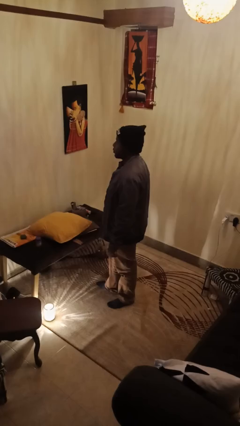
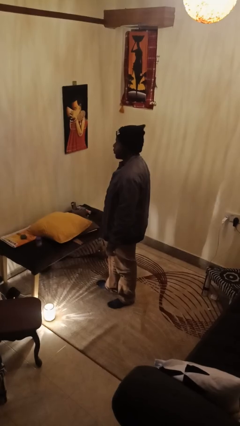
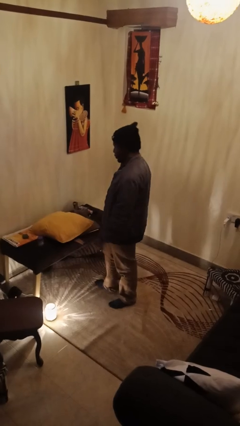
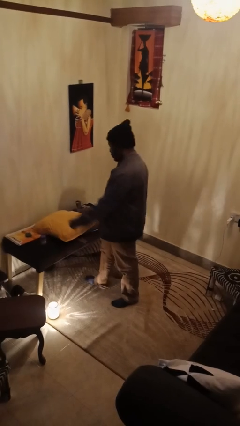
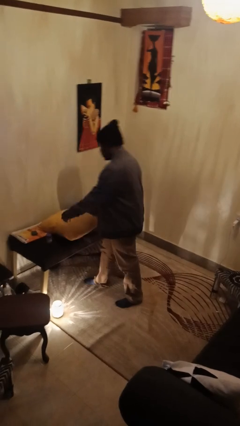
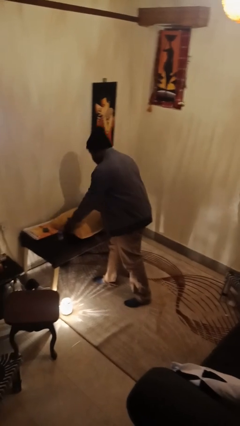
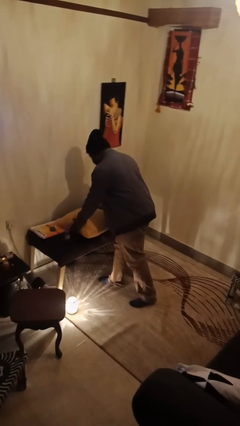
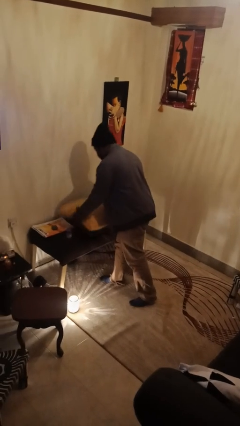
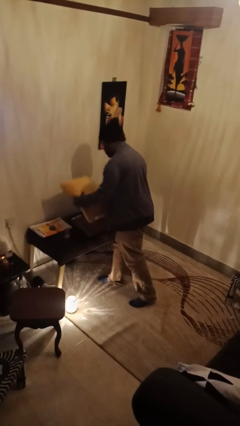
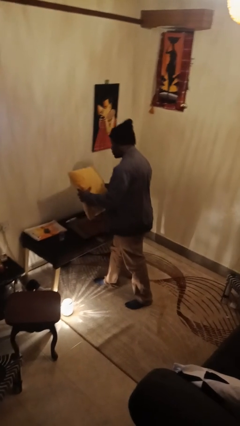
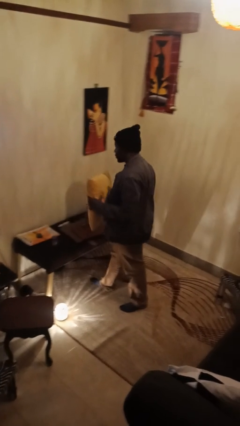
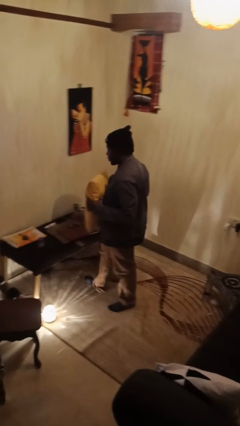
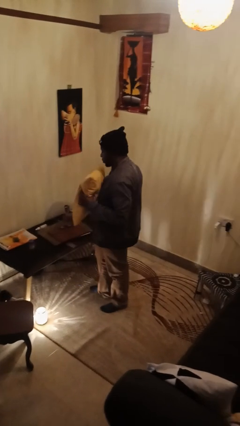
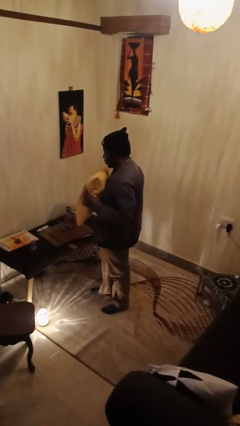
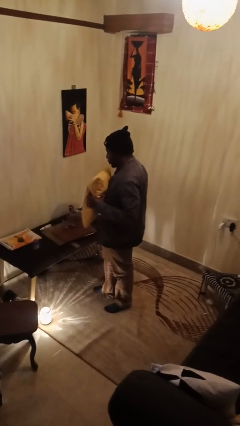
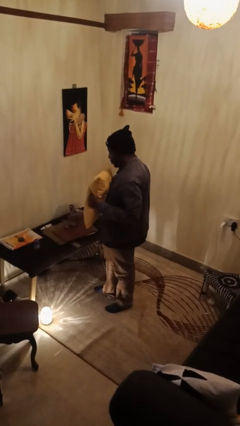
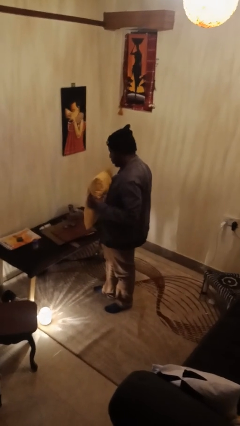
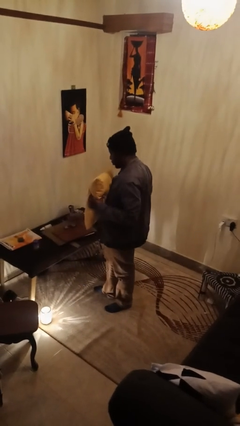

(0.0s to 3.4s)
person picks up object from countertop

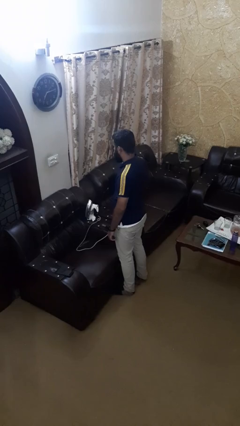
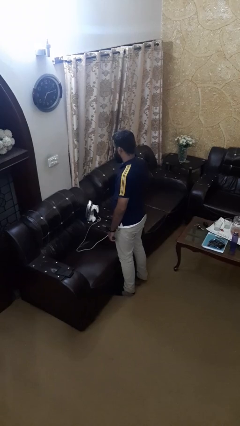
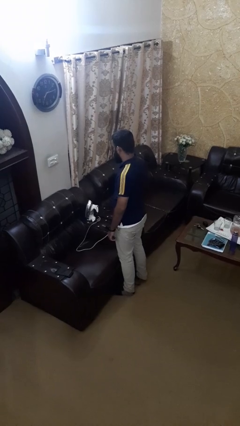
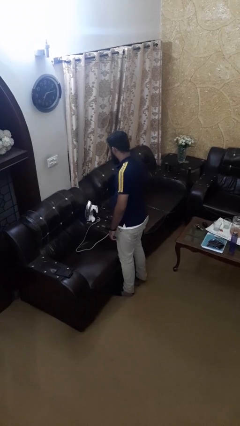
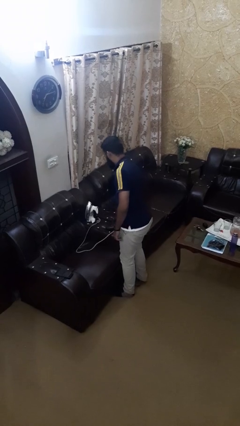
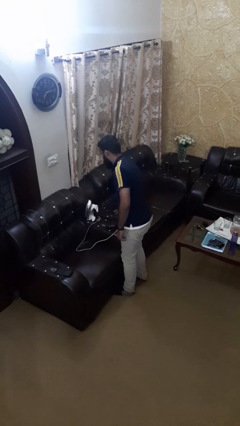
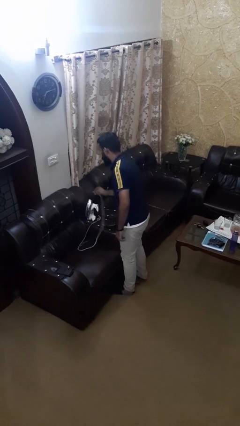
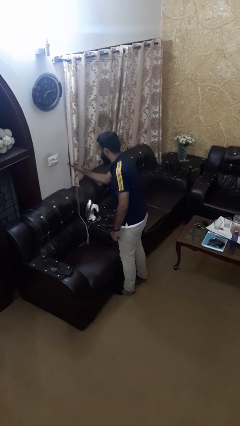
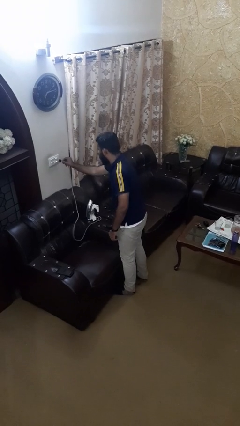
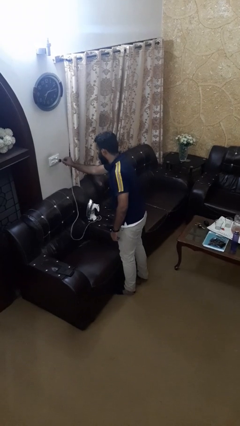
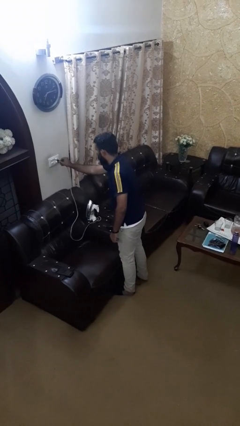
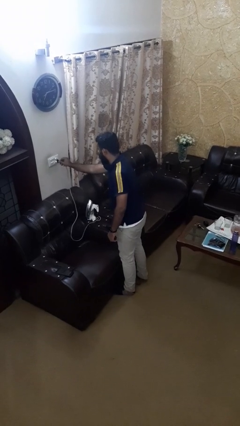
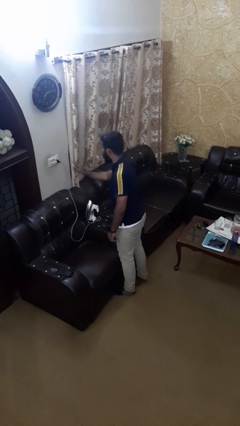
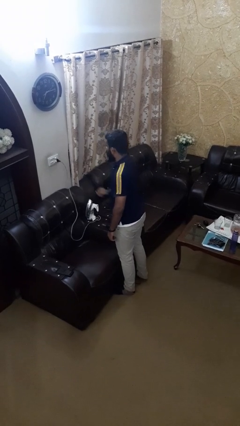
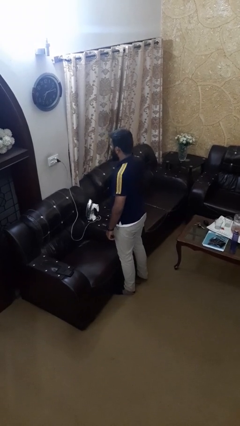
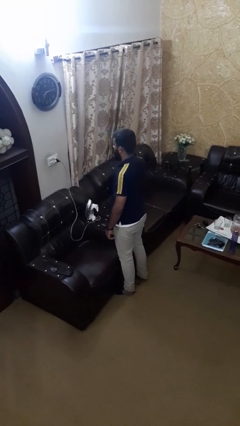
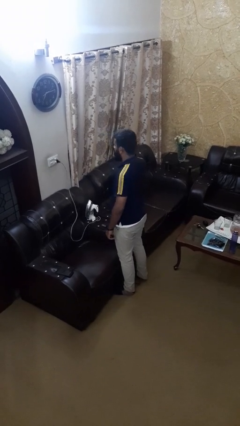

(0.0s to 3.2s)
person plugs into electrical socket

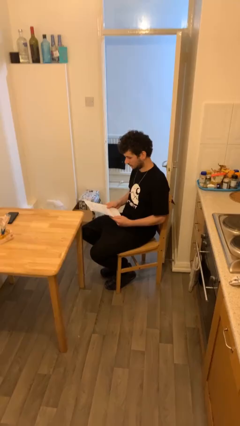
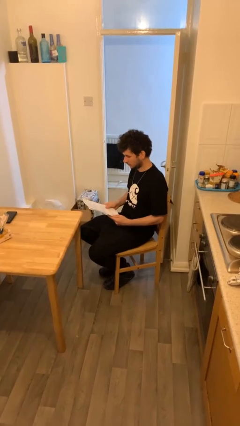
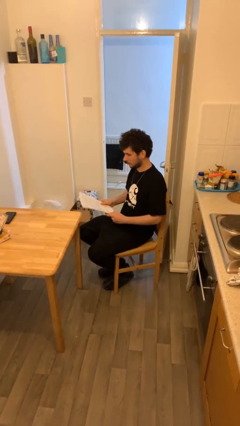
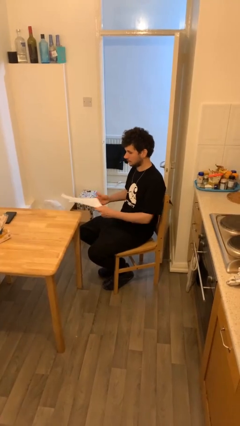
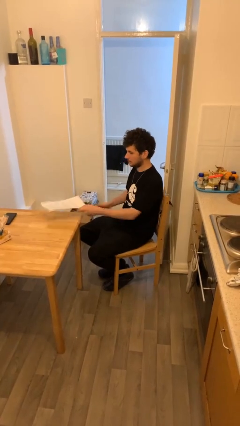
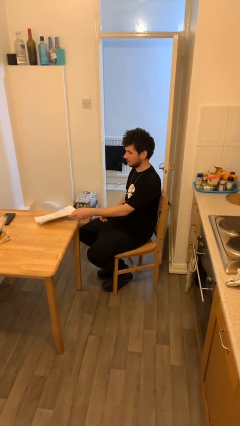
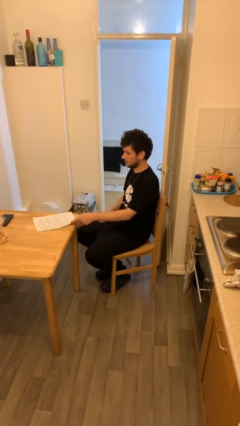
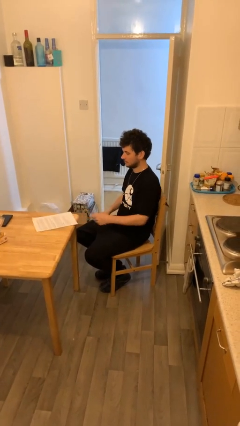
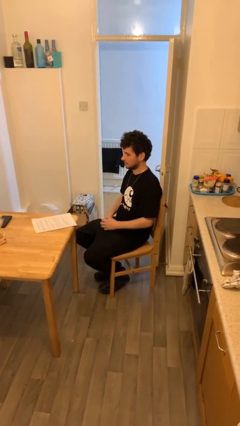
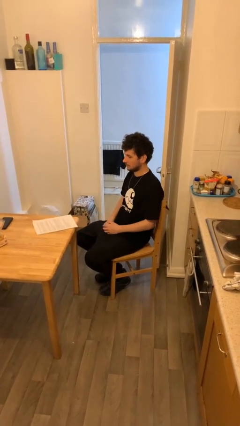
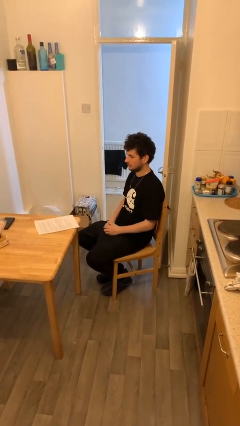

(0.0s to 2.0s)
person puts down object on table

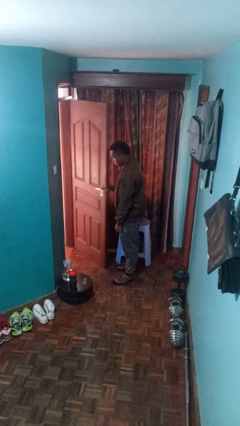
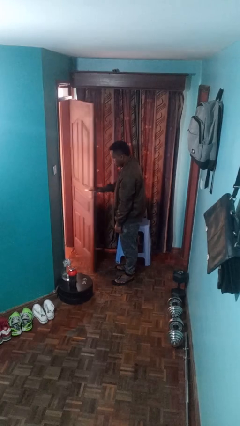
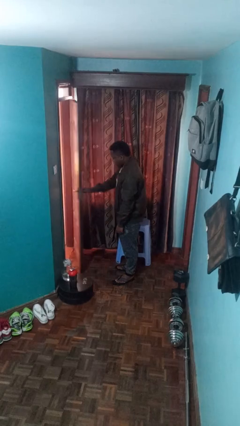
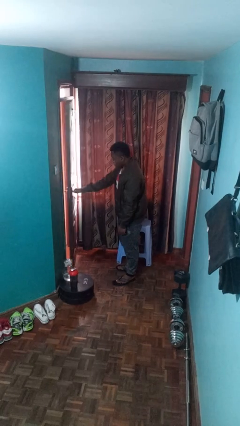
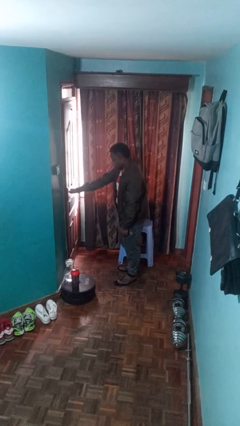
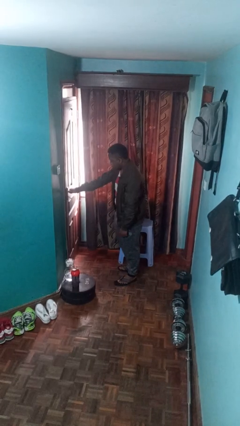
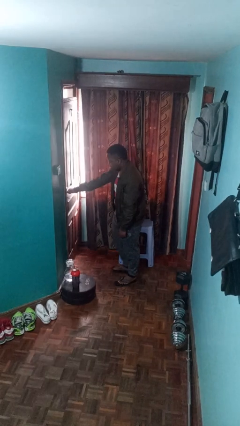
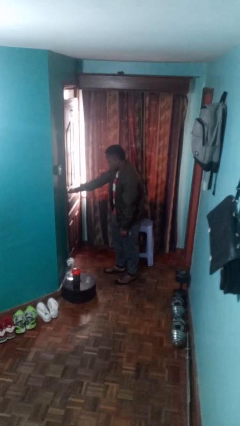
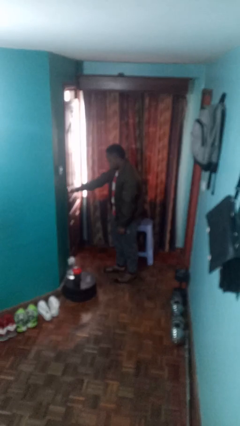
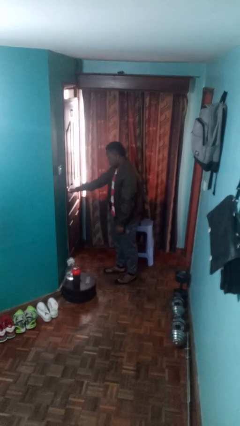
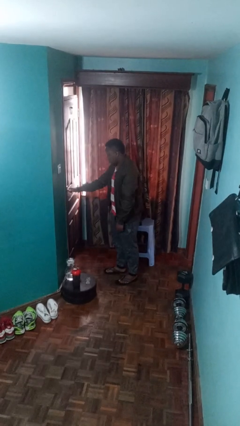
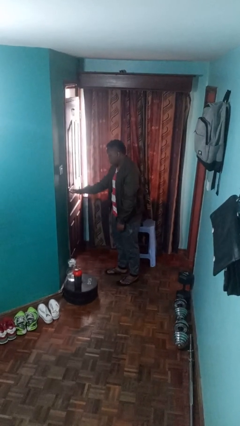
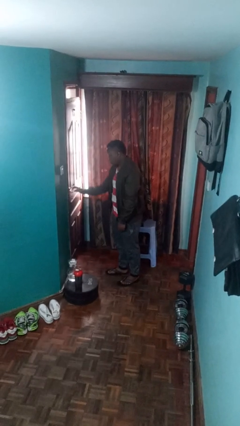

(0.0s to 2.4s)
person closes facility door

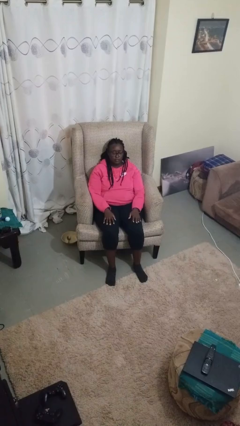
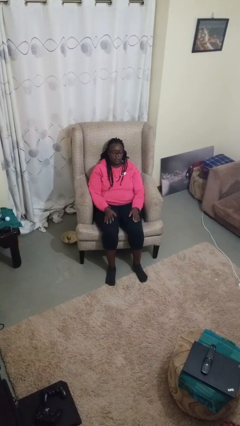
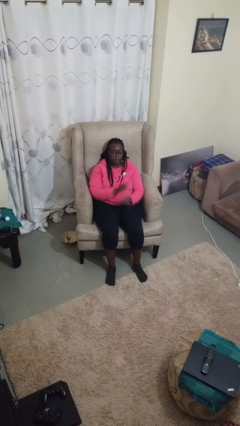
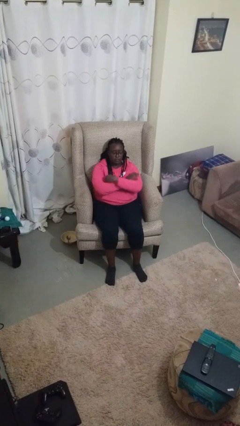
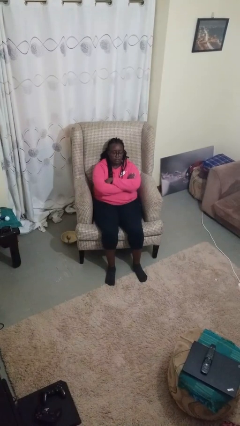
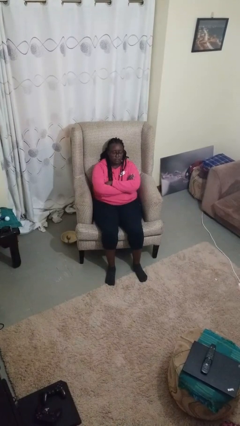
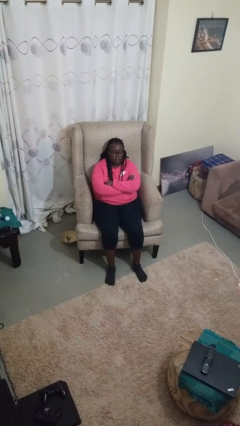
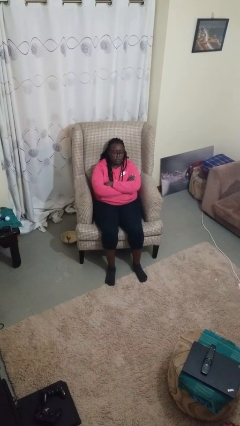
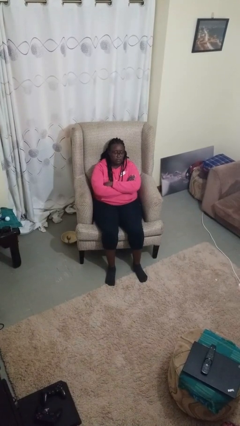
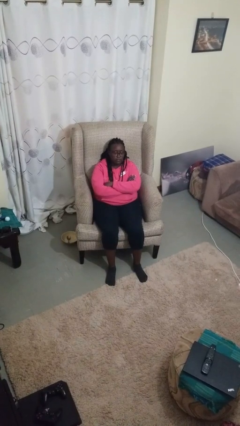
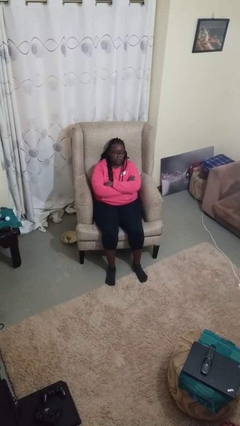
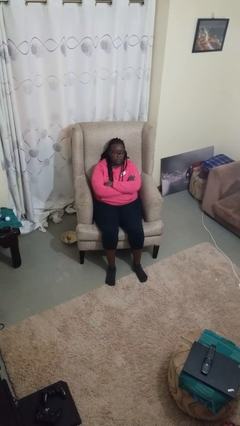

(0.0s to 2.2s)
person crosses arms

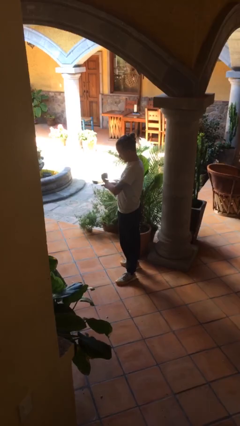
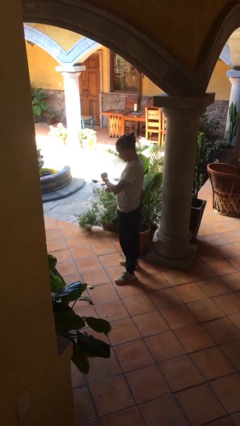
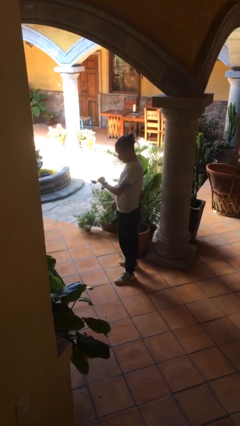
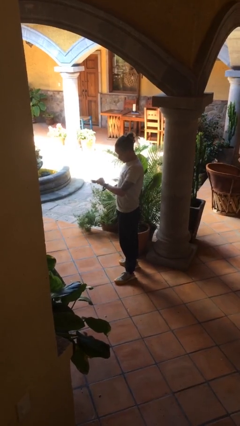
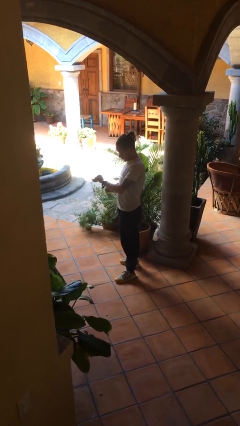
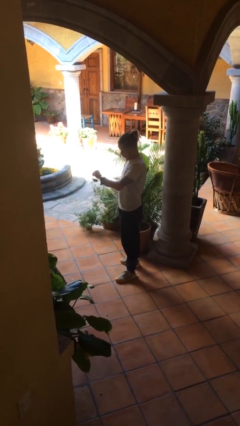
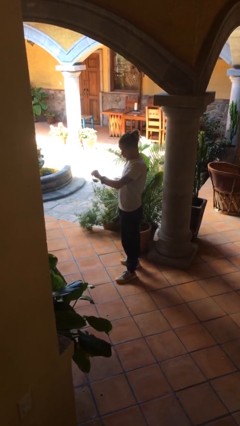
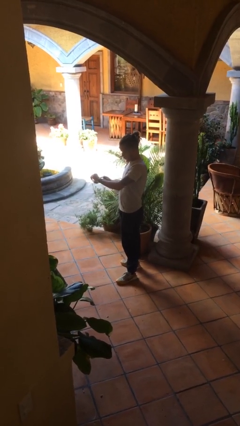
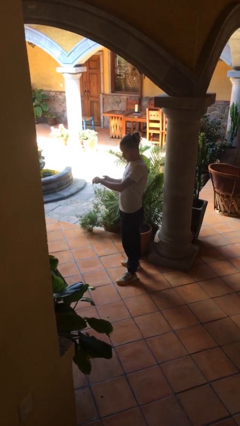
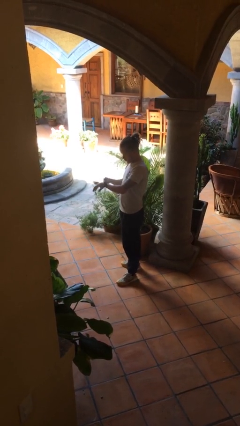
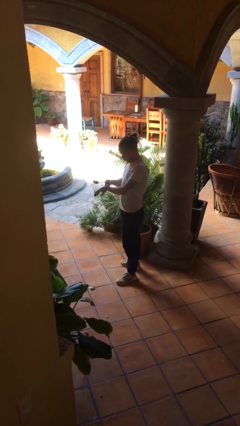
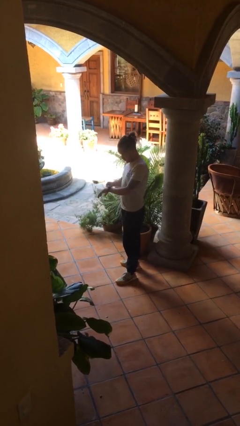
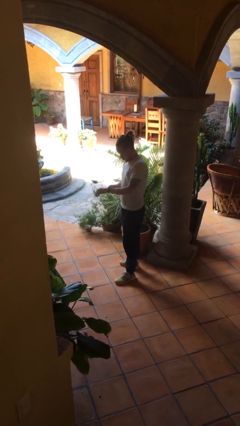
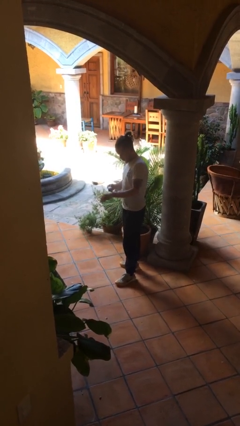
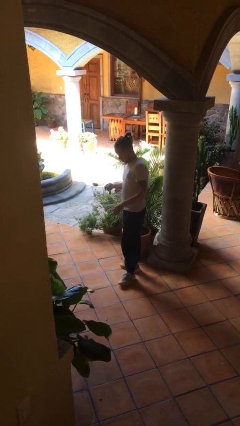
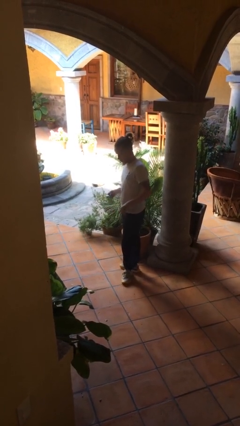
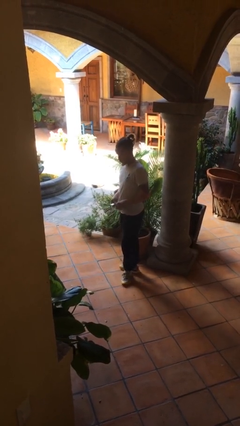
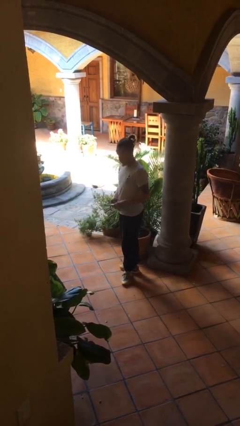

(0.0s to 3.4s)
person takes off wristwatch

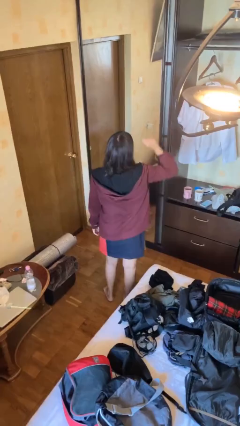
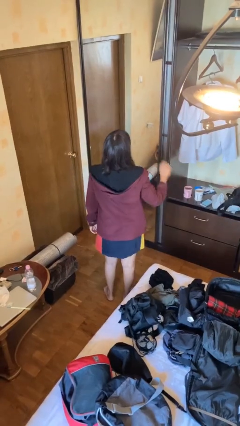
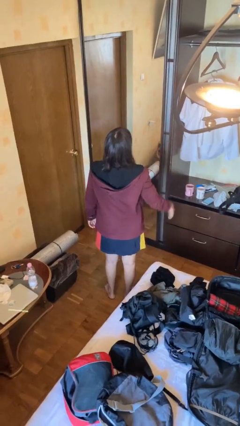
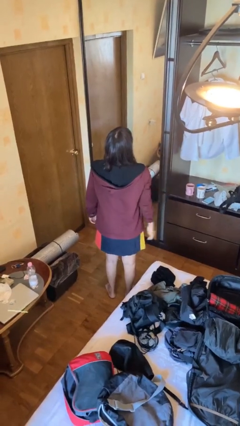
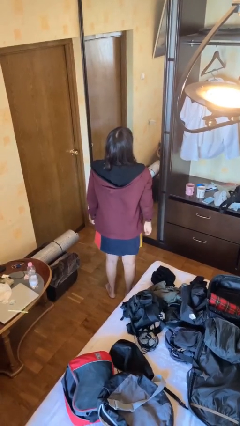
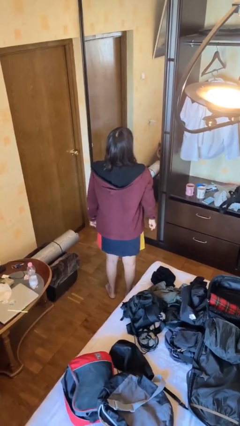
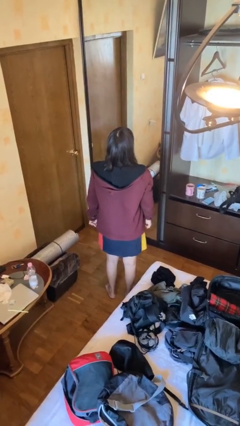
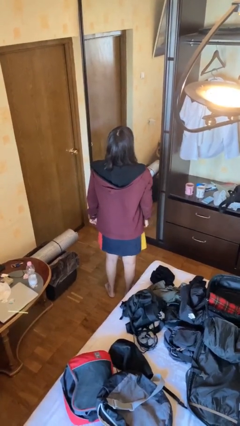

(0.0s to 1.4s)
person gestures lower hand
